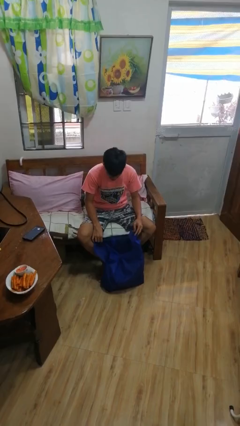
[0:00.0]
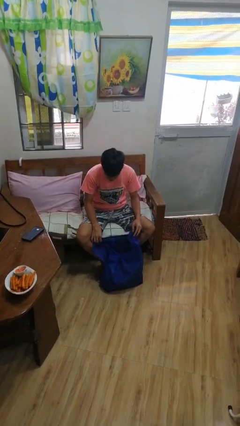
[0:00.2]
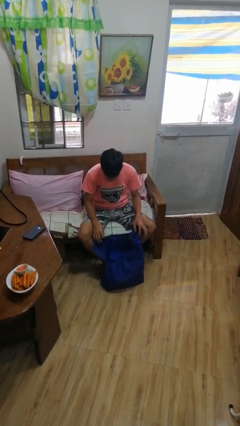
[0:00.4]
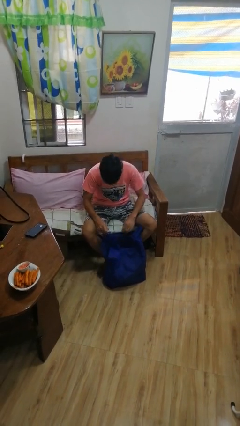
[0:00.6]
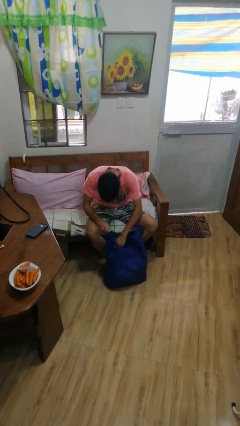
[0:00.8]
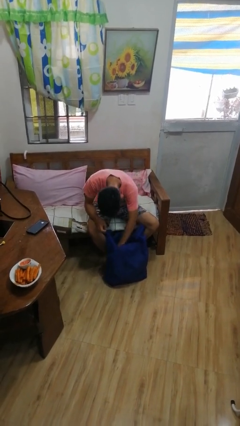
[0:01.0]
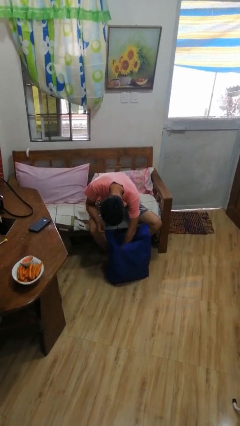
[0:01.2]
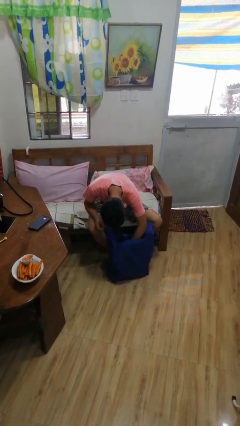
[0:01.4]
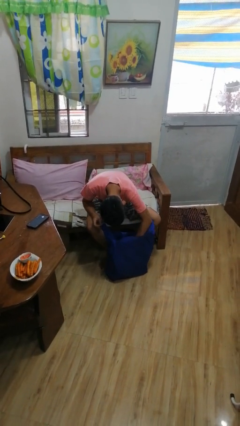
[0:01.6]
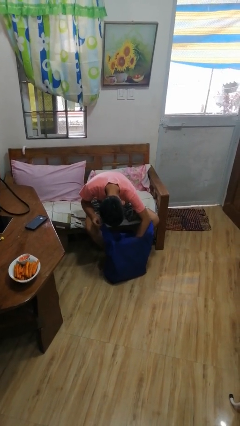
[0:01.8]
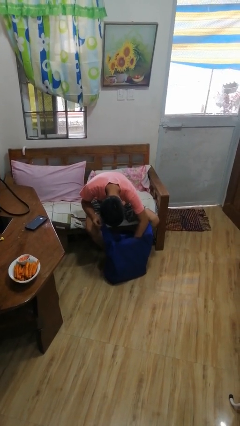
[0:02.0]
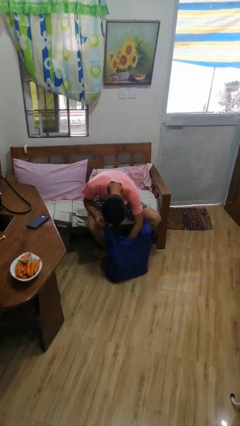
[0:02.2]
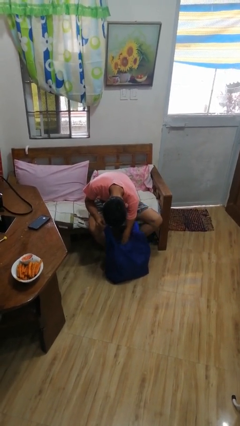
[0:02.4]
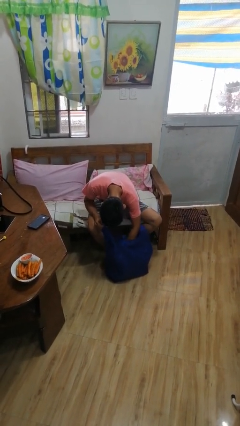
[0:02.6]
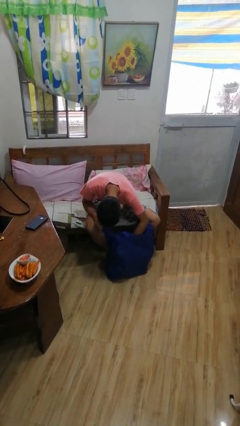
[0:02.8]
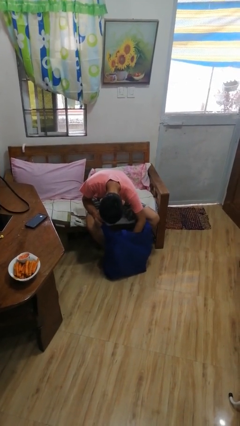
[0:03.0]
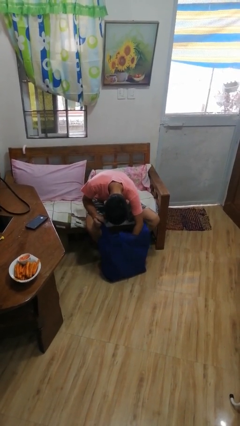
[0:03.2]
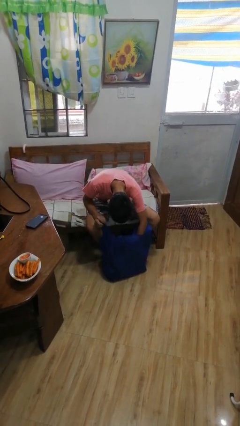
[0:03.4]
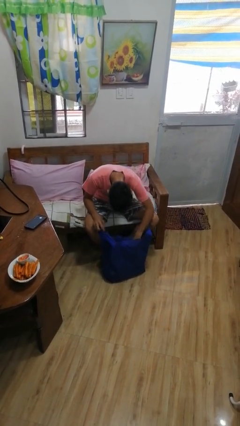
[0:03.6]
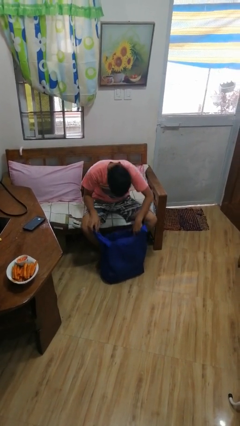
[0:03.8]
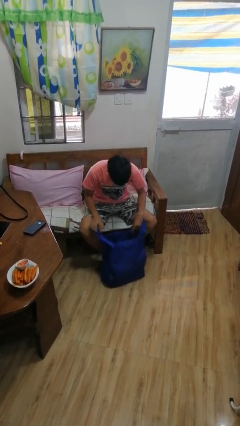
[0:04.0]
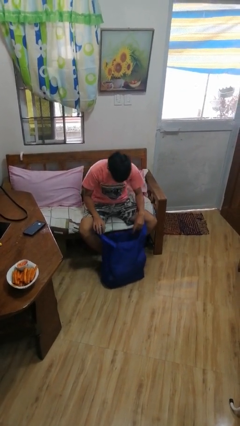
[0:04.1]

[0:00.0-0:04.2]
person searches in bag

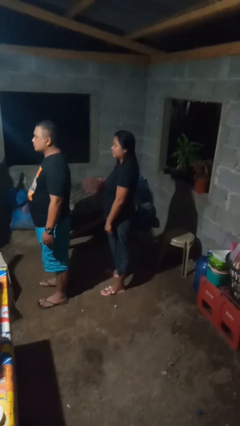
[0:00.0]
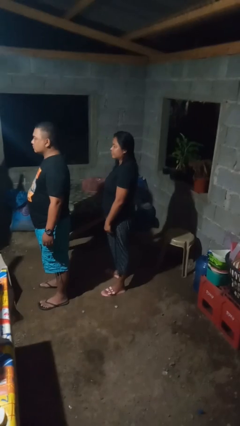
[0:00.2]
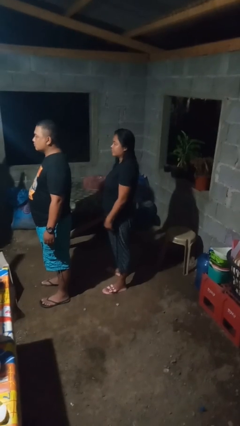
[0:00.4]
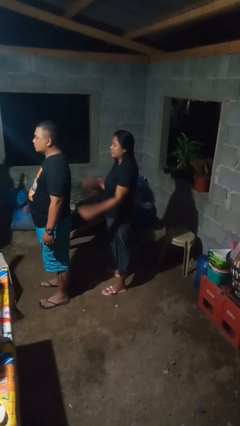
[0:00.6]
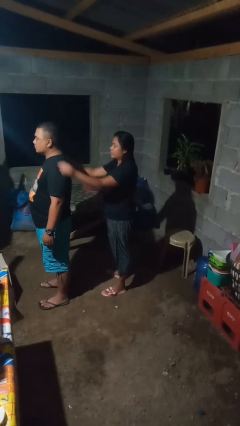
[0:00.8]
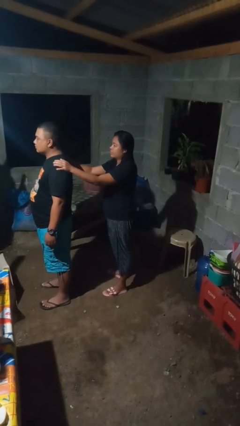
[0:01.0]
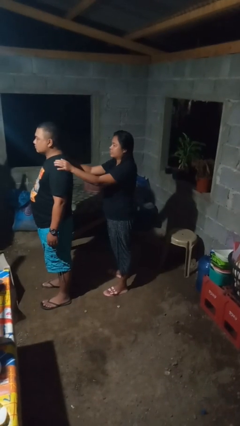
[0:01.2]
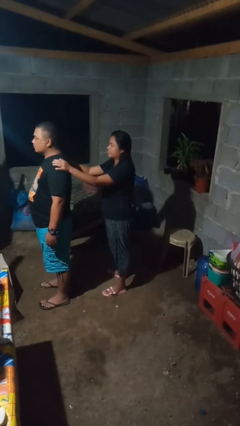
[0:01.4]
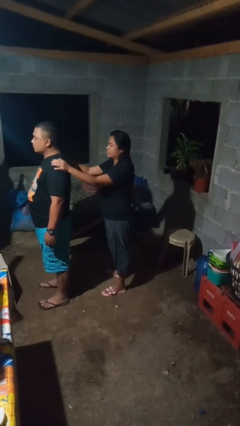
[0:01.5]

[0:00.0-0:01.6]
person grabs person by shoulder

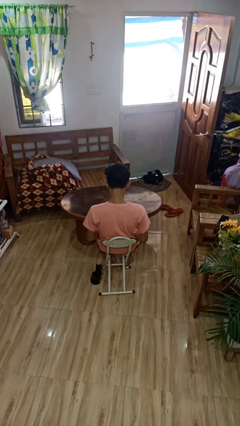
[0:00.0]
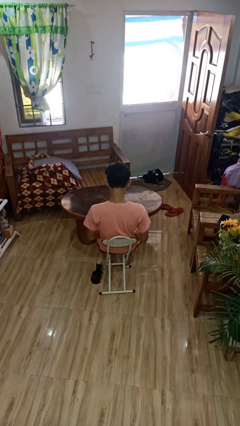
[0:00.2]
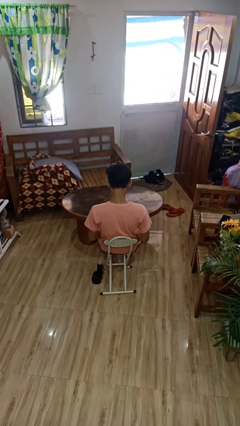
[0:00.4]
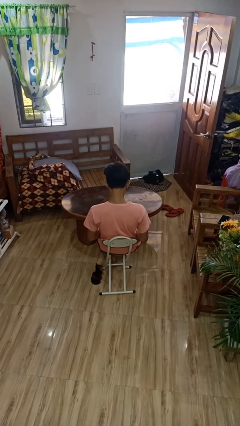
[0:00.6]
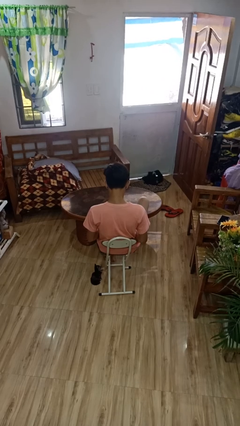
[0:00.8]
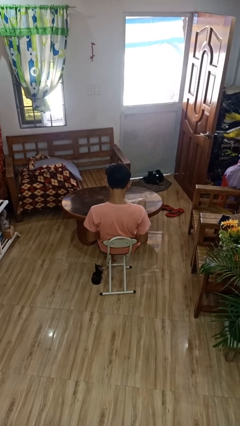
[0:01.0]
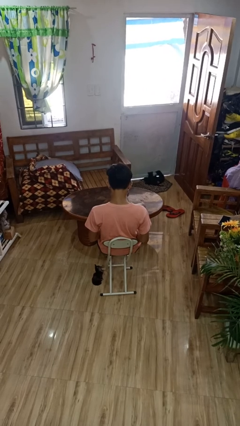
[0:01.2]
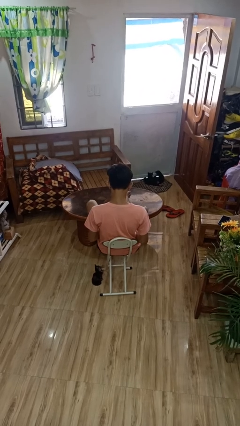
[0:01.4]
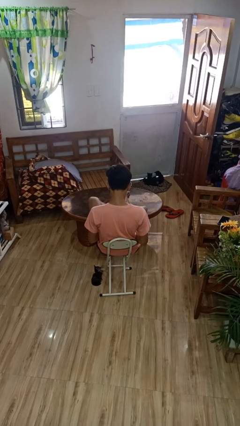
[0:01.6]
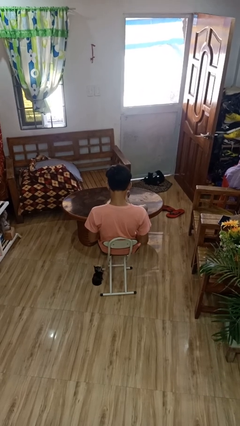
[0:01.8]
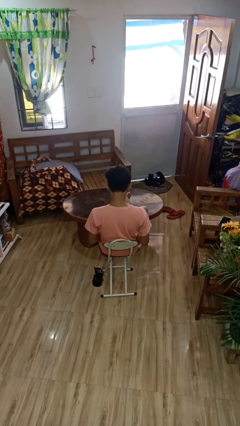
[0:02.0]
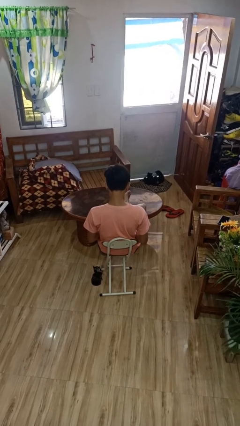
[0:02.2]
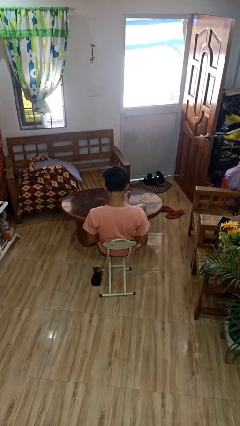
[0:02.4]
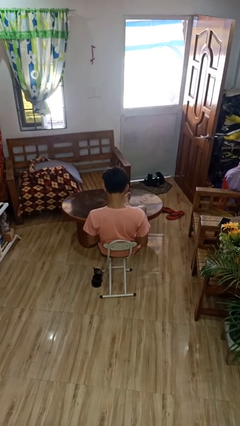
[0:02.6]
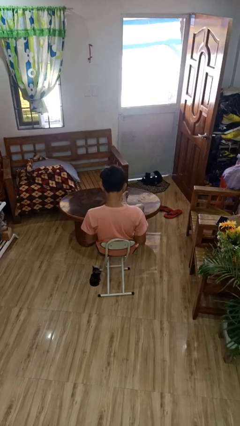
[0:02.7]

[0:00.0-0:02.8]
person puts feet up

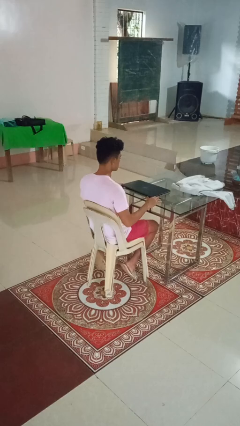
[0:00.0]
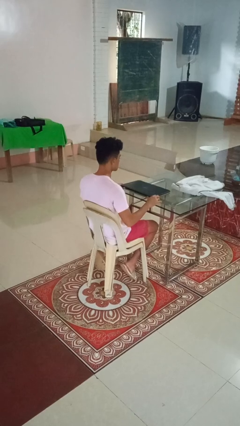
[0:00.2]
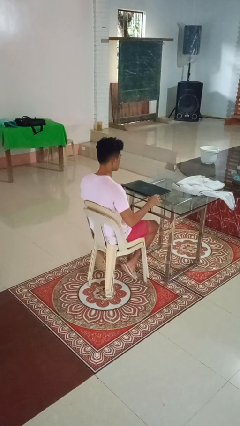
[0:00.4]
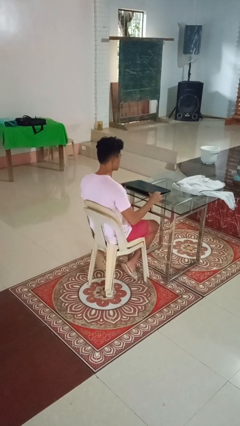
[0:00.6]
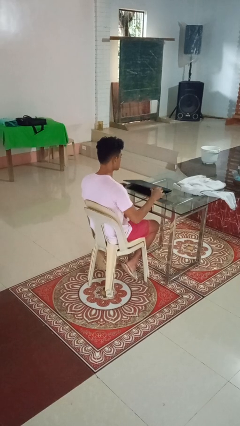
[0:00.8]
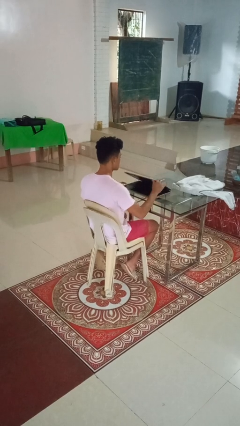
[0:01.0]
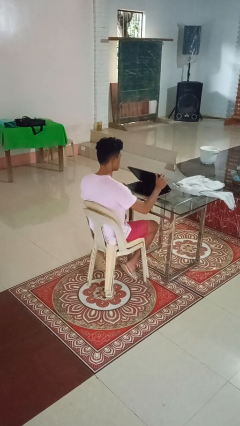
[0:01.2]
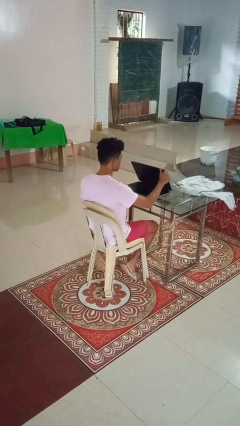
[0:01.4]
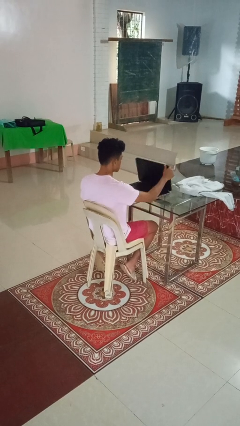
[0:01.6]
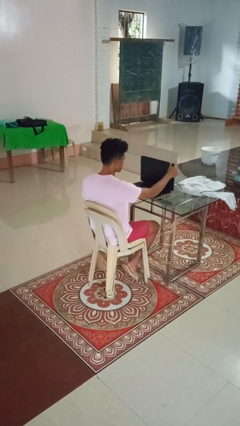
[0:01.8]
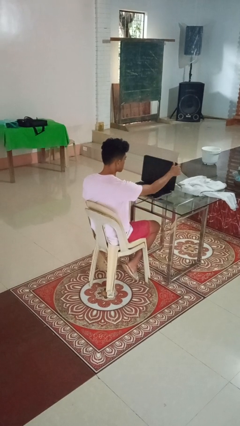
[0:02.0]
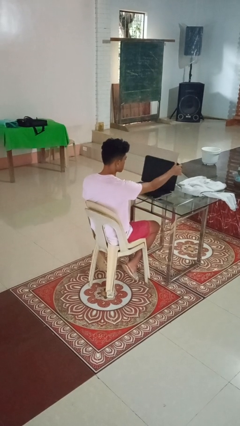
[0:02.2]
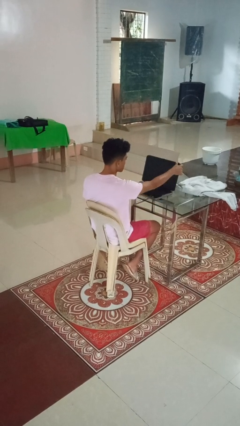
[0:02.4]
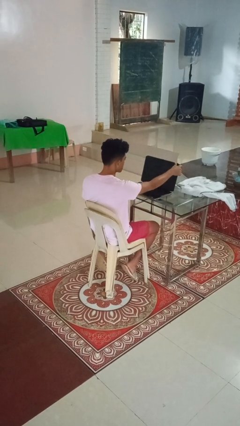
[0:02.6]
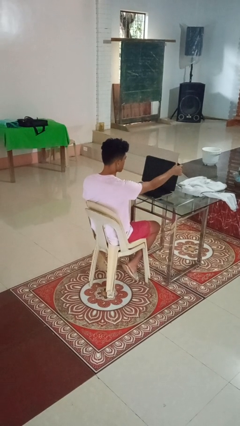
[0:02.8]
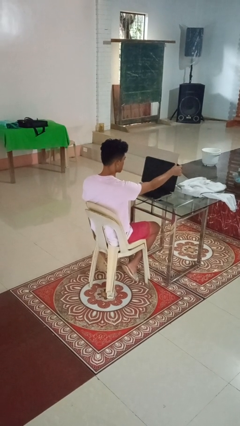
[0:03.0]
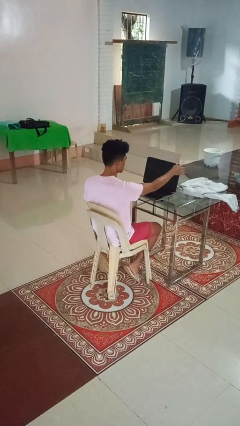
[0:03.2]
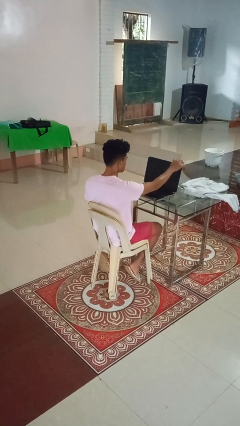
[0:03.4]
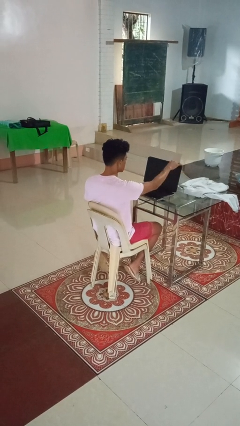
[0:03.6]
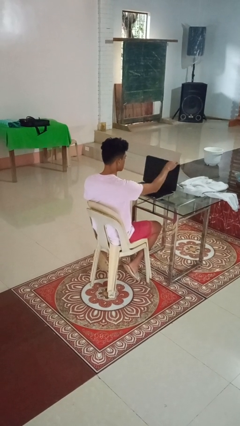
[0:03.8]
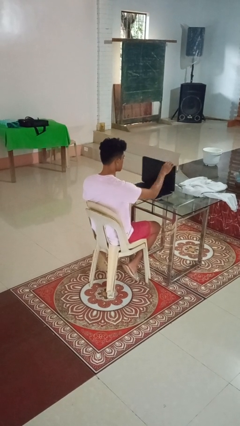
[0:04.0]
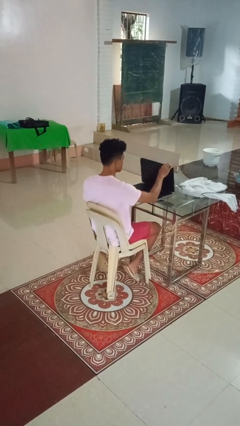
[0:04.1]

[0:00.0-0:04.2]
person opens laptop

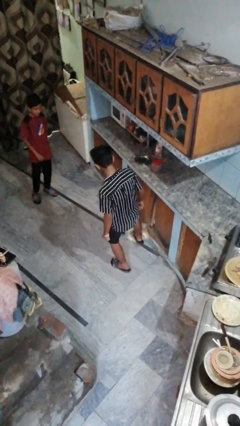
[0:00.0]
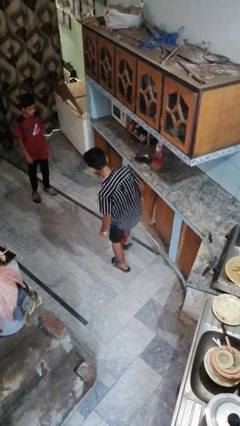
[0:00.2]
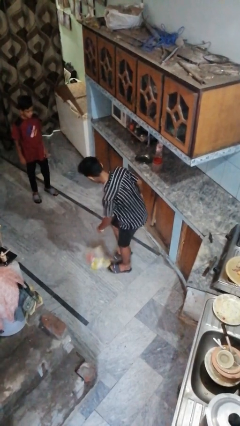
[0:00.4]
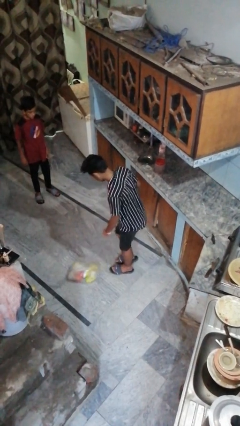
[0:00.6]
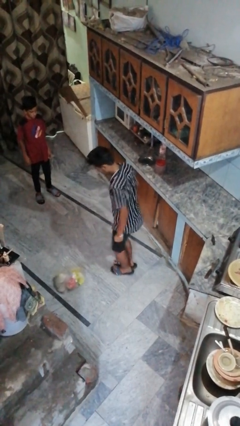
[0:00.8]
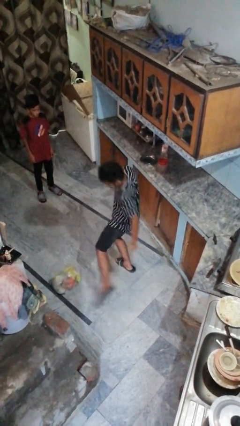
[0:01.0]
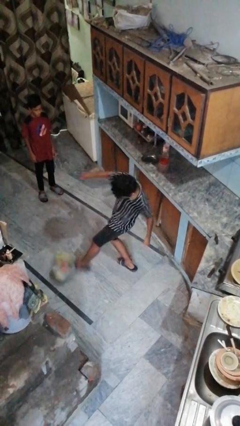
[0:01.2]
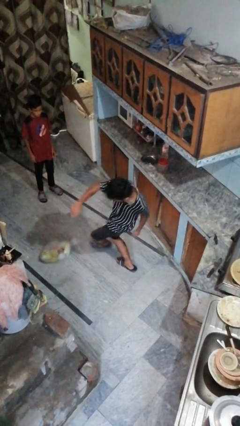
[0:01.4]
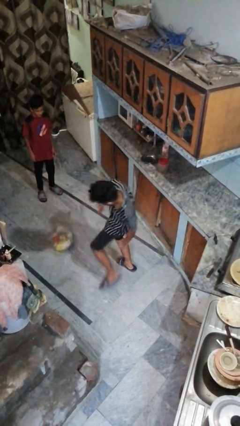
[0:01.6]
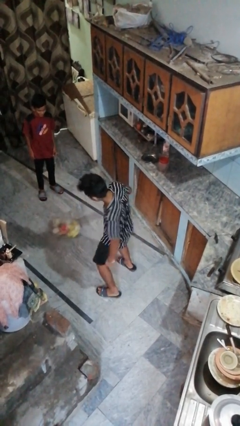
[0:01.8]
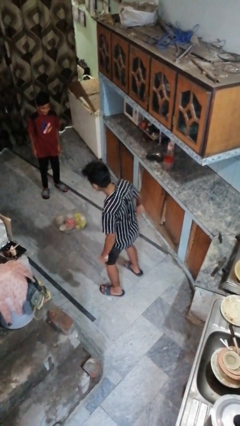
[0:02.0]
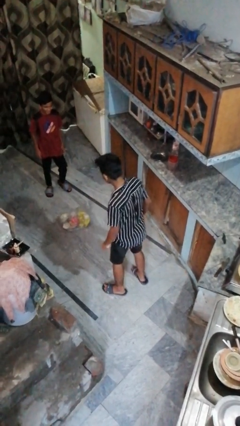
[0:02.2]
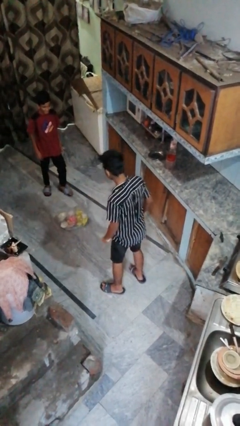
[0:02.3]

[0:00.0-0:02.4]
person kicks object to person

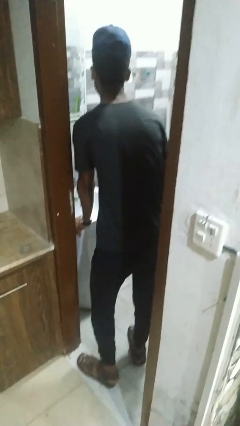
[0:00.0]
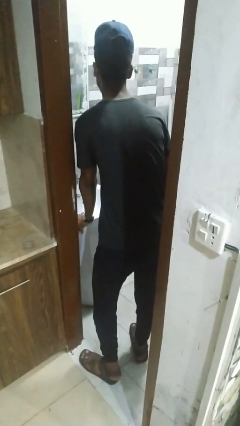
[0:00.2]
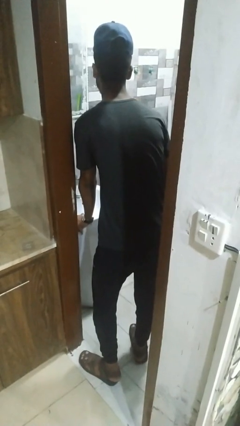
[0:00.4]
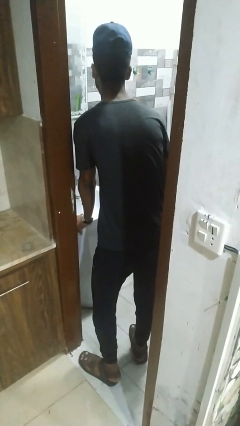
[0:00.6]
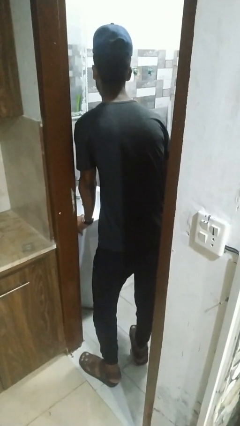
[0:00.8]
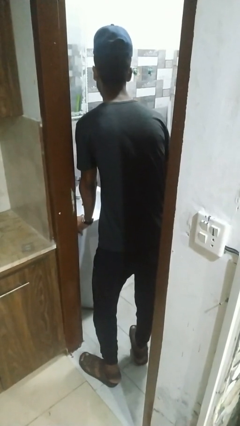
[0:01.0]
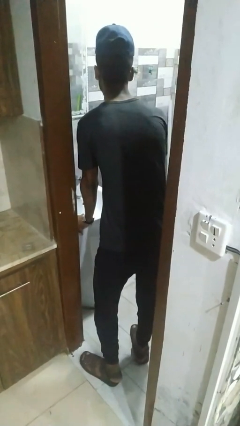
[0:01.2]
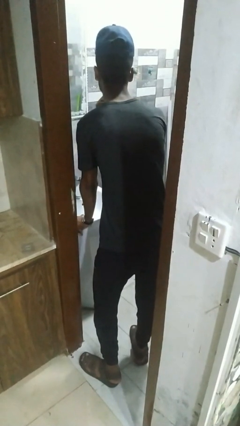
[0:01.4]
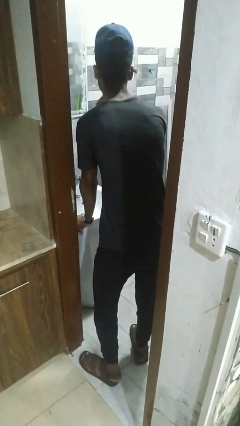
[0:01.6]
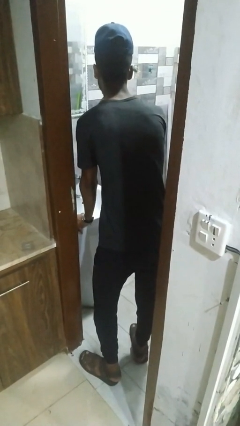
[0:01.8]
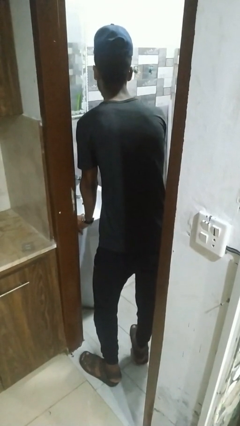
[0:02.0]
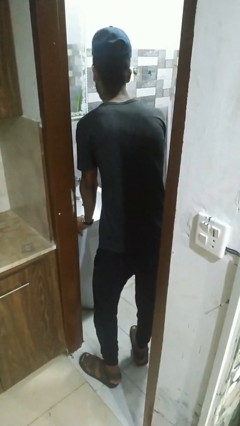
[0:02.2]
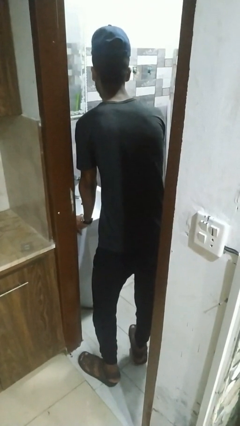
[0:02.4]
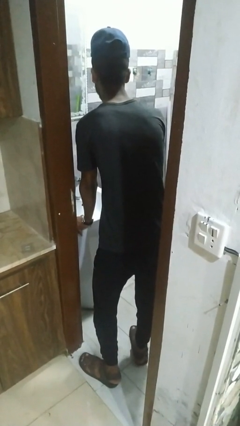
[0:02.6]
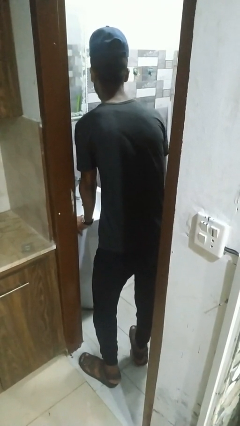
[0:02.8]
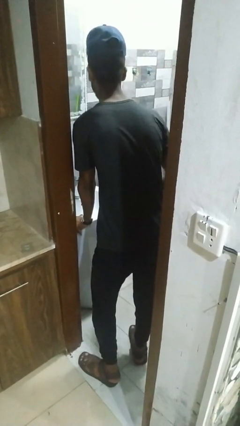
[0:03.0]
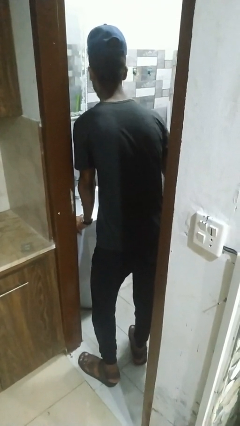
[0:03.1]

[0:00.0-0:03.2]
person flosses
